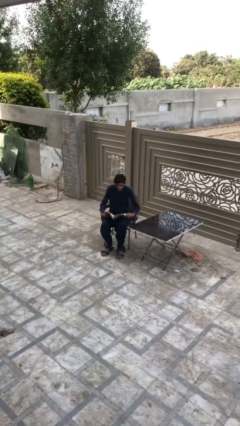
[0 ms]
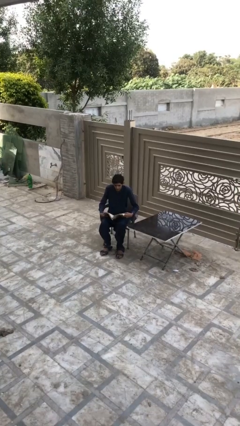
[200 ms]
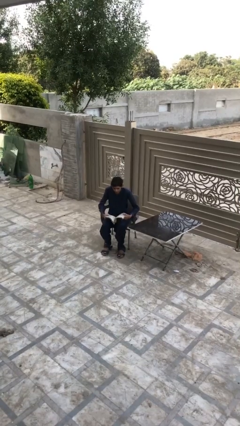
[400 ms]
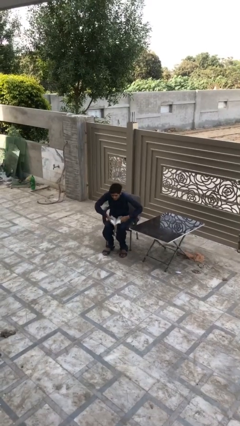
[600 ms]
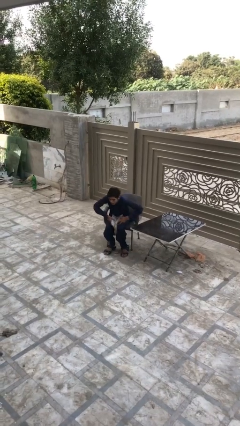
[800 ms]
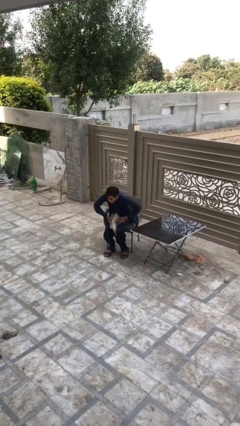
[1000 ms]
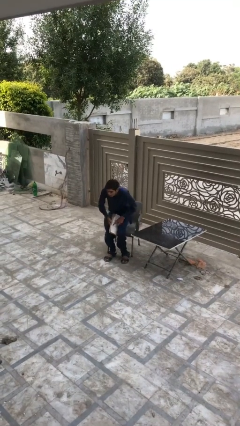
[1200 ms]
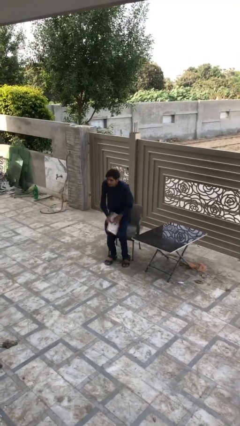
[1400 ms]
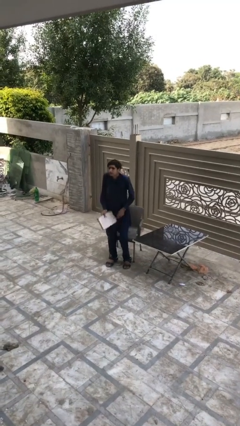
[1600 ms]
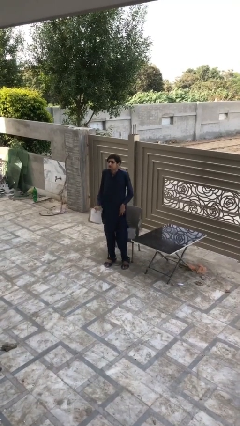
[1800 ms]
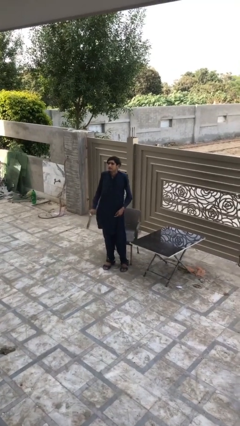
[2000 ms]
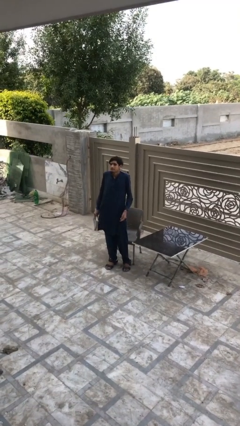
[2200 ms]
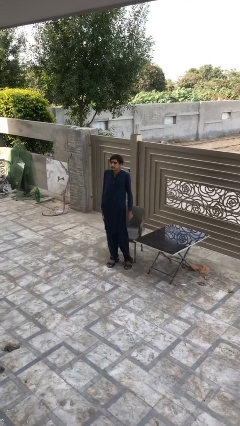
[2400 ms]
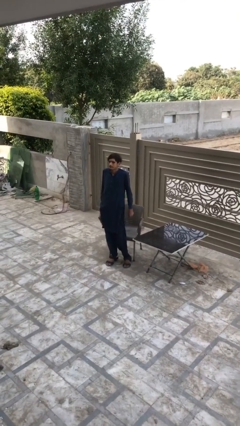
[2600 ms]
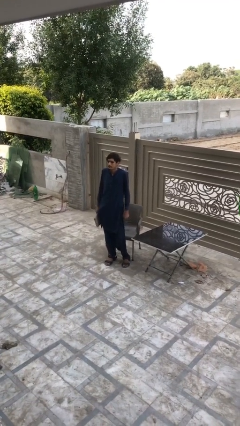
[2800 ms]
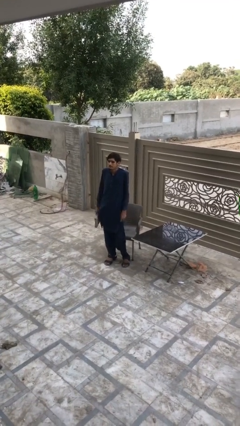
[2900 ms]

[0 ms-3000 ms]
person stands up

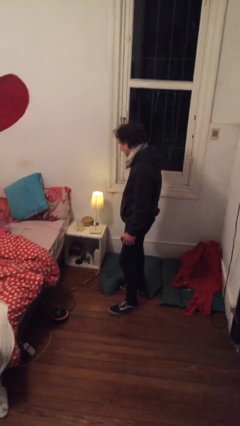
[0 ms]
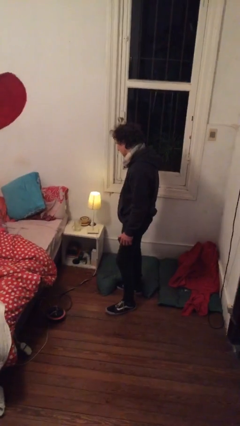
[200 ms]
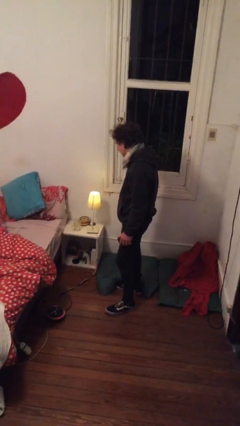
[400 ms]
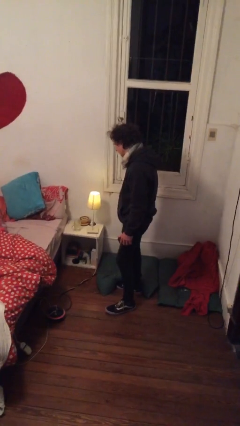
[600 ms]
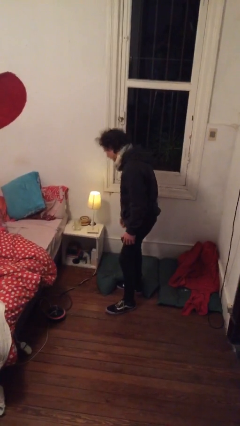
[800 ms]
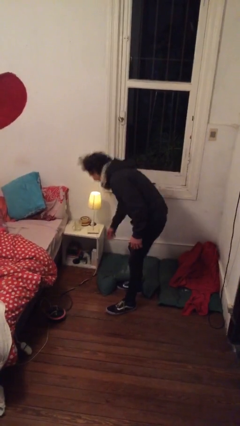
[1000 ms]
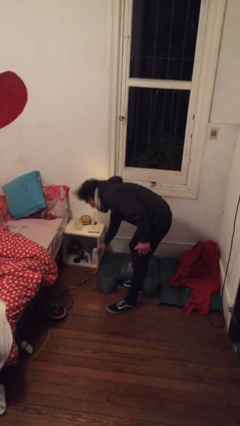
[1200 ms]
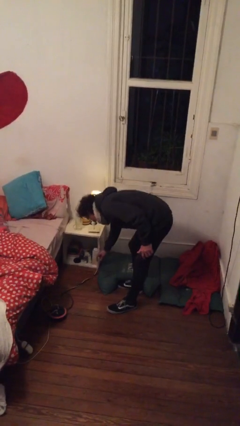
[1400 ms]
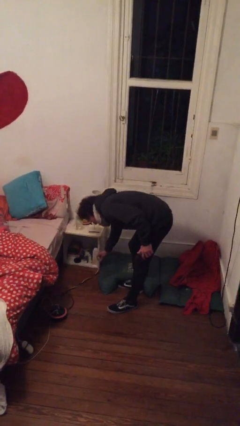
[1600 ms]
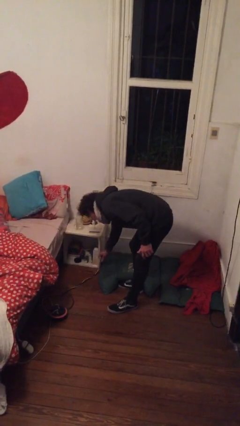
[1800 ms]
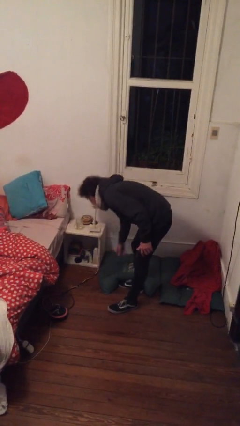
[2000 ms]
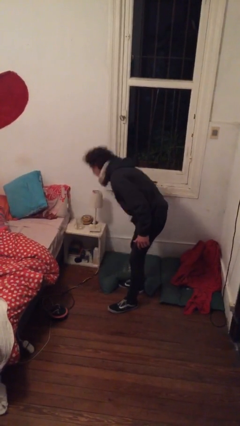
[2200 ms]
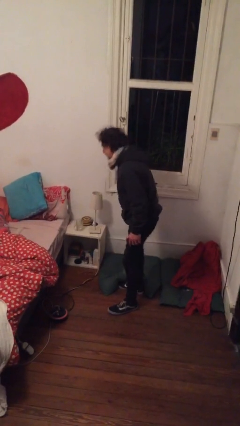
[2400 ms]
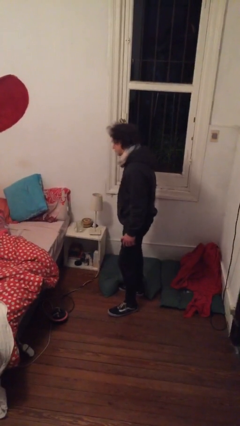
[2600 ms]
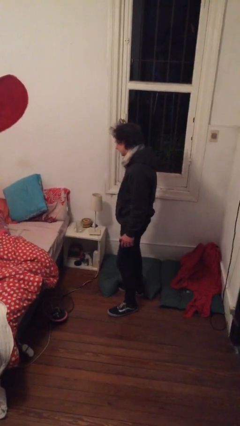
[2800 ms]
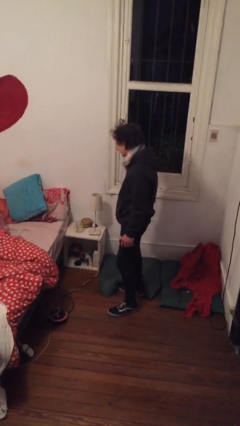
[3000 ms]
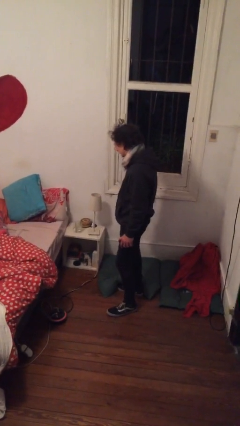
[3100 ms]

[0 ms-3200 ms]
person turns off lamp

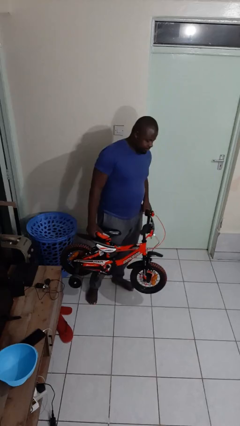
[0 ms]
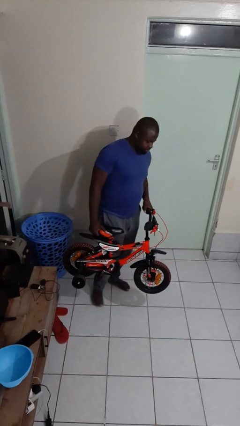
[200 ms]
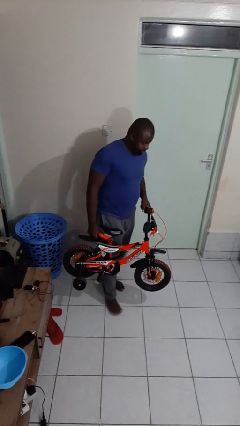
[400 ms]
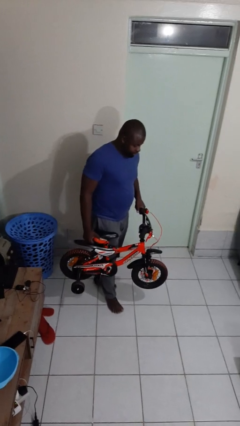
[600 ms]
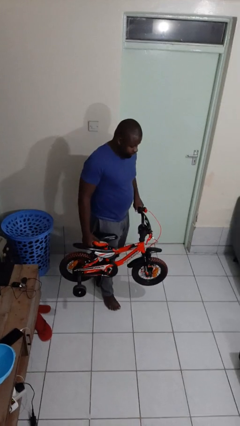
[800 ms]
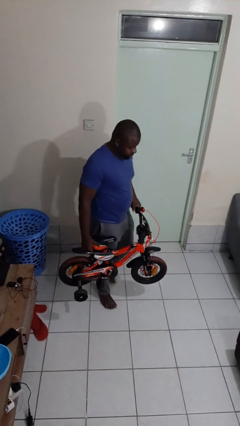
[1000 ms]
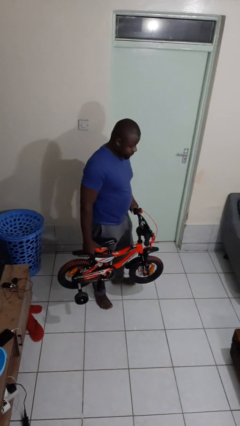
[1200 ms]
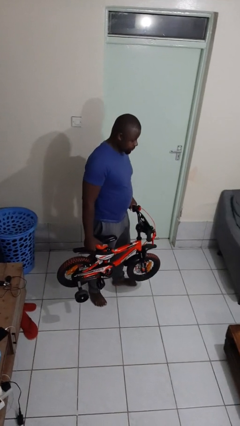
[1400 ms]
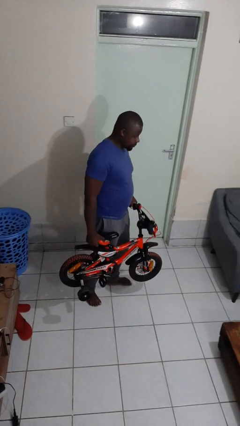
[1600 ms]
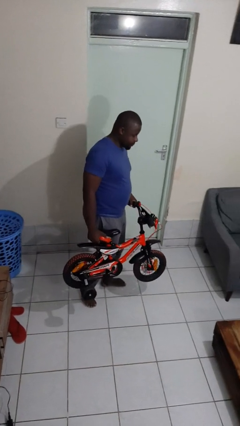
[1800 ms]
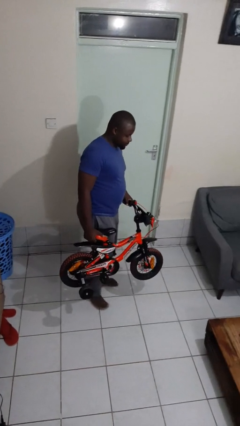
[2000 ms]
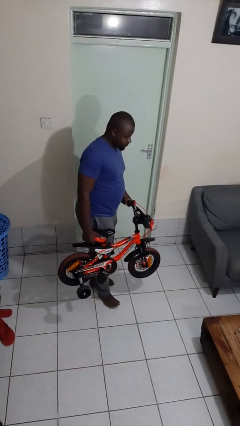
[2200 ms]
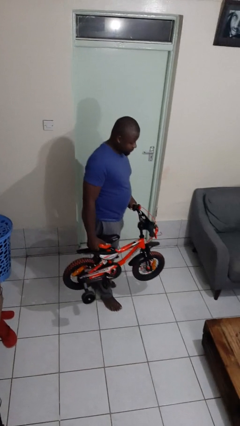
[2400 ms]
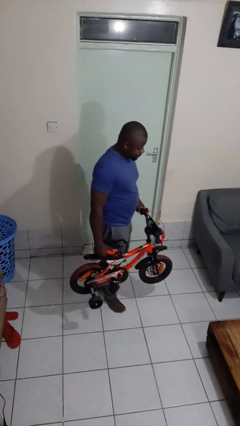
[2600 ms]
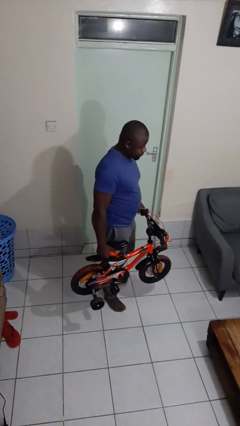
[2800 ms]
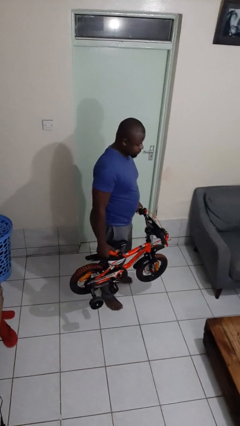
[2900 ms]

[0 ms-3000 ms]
person carries bicycle

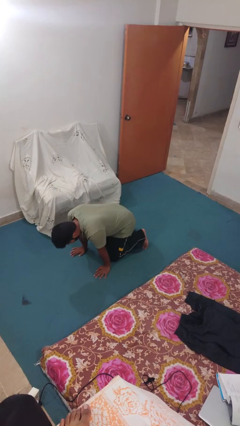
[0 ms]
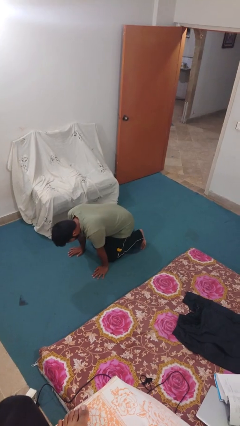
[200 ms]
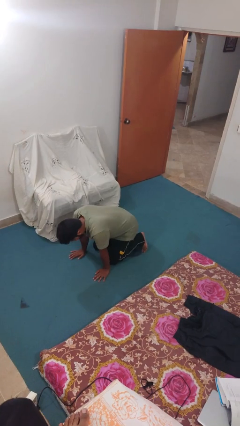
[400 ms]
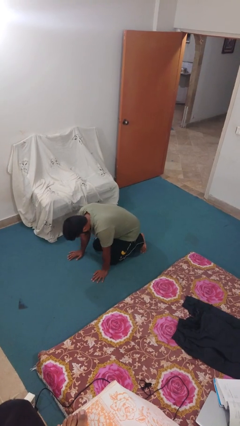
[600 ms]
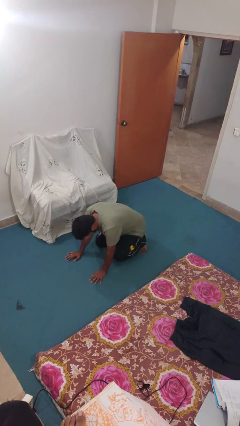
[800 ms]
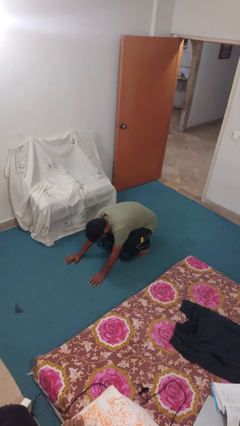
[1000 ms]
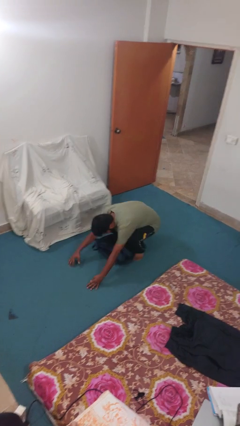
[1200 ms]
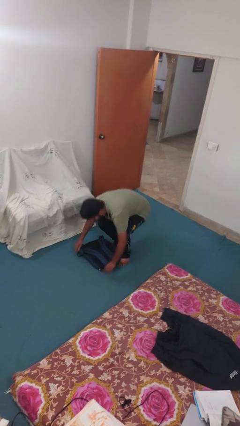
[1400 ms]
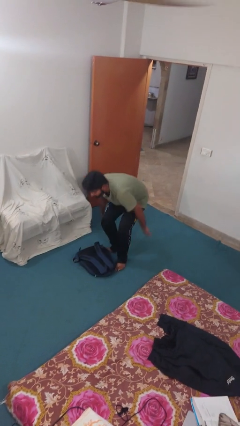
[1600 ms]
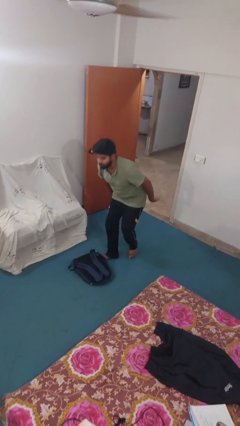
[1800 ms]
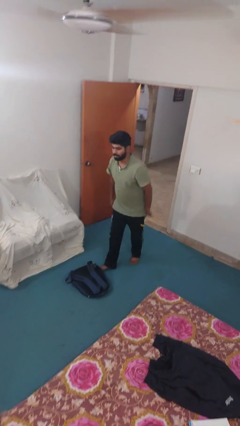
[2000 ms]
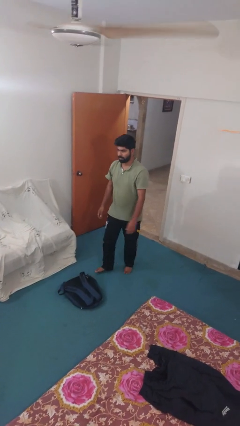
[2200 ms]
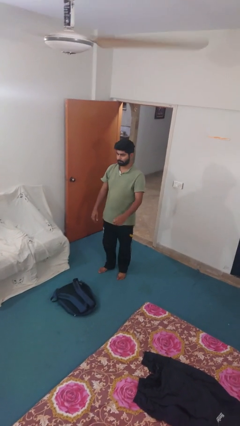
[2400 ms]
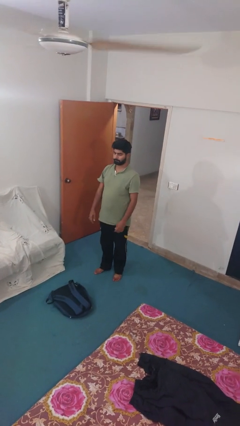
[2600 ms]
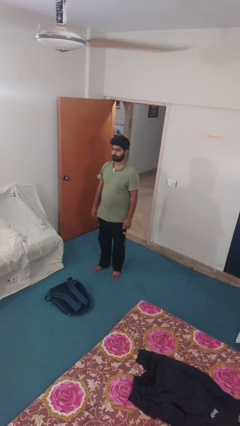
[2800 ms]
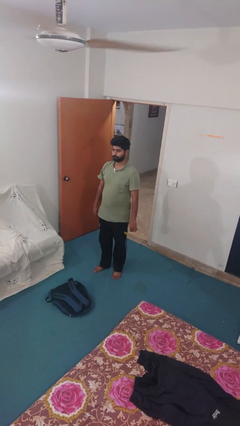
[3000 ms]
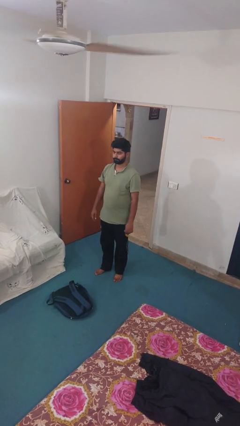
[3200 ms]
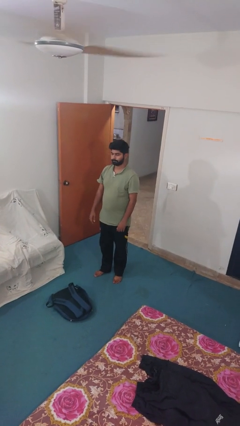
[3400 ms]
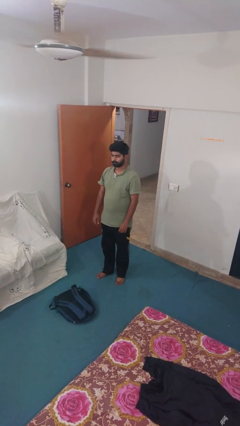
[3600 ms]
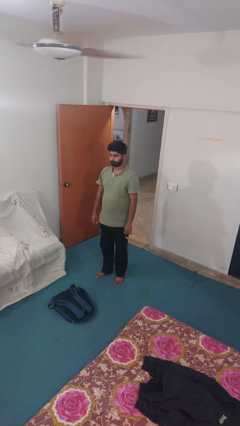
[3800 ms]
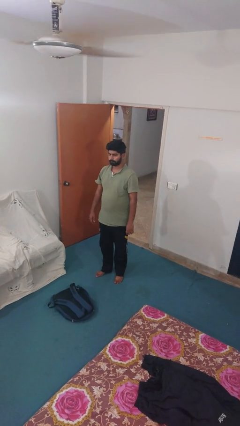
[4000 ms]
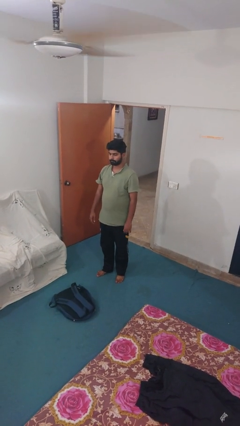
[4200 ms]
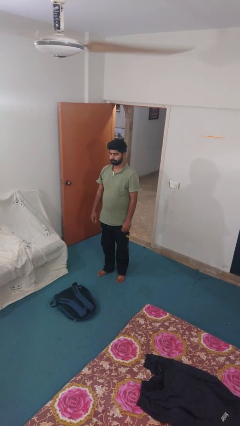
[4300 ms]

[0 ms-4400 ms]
person stands up from floor

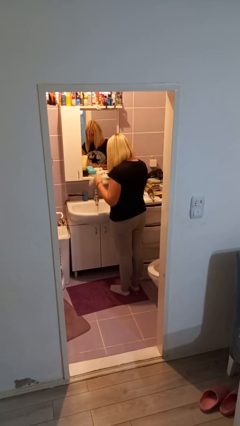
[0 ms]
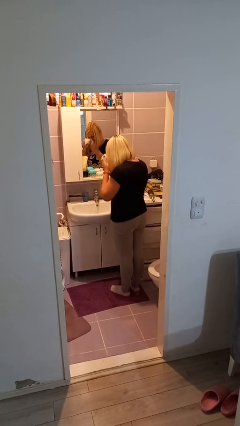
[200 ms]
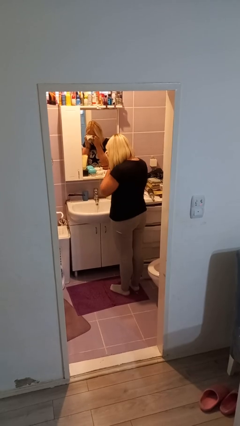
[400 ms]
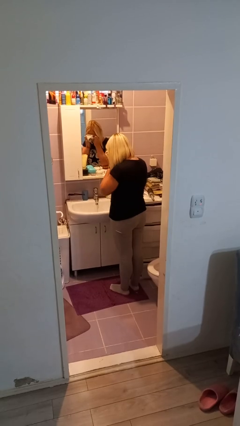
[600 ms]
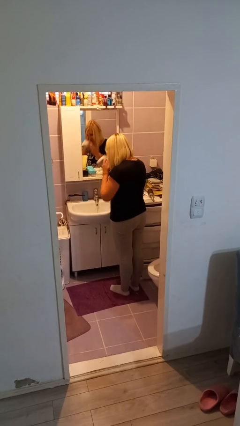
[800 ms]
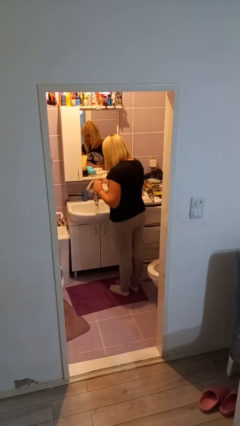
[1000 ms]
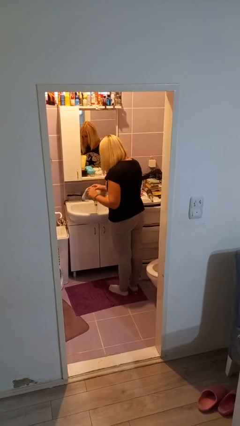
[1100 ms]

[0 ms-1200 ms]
person dries face with towel

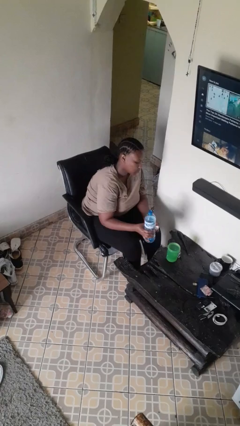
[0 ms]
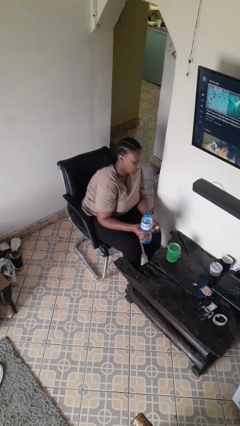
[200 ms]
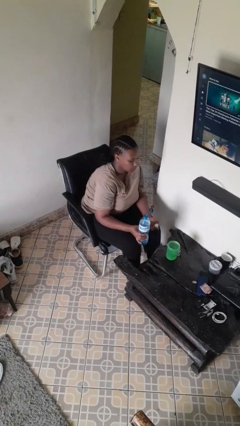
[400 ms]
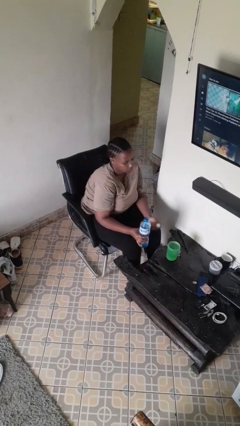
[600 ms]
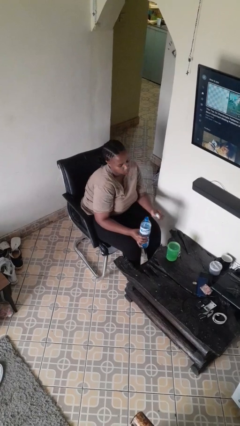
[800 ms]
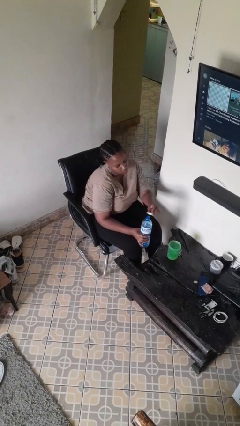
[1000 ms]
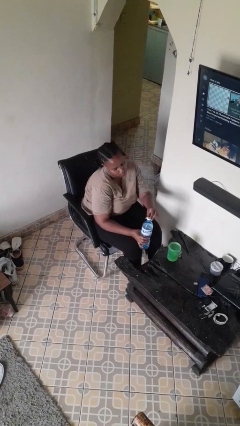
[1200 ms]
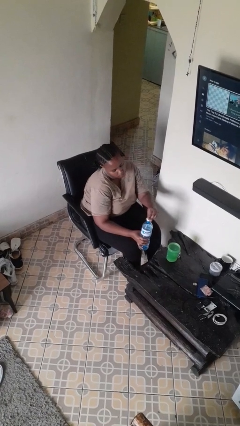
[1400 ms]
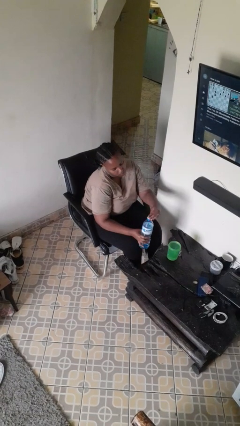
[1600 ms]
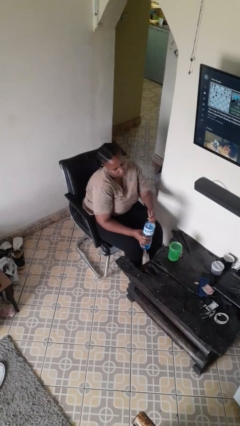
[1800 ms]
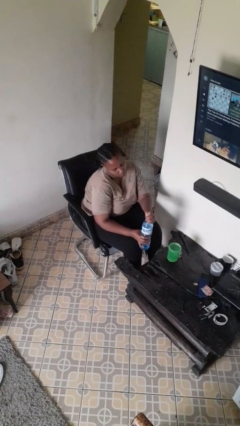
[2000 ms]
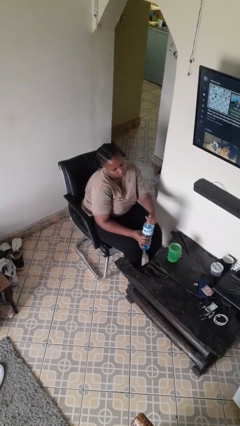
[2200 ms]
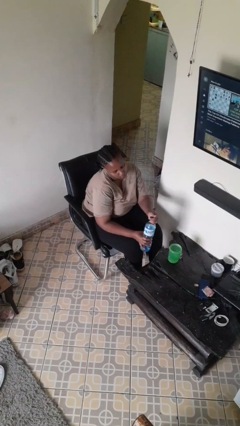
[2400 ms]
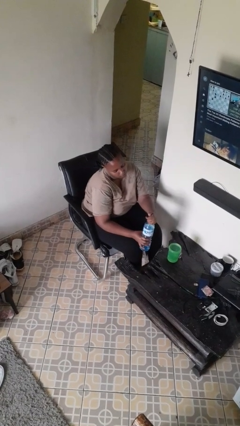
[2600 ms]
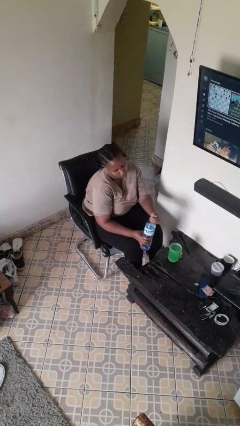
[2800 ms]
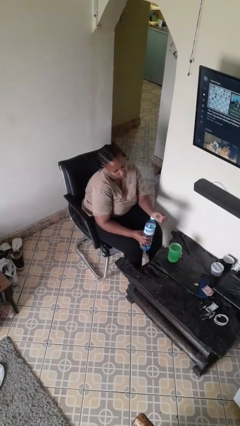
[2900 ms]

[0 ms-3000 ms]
person screws lid to bottle
